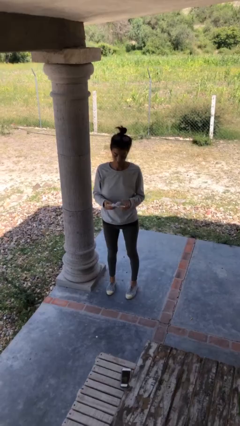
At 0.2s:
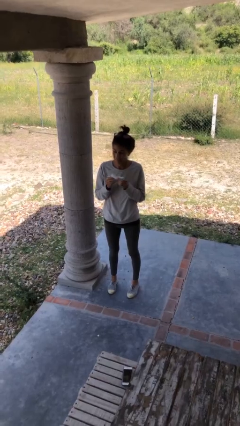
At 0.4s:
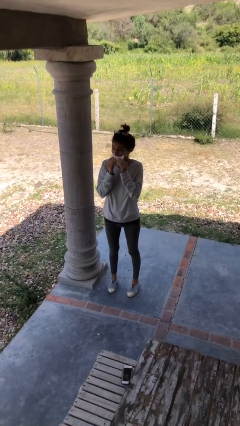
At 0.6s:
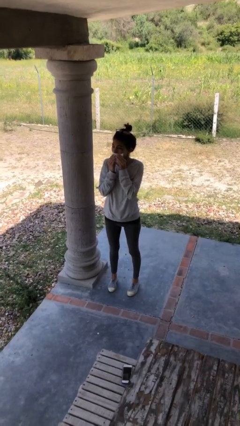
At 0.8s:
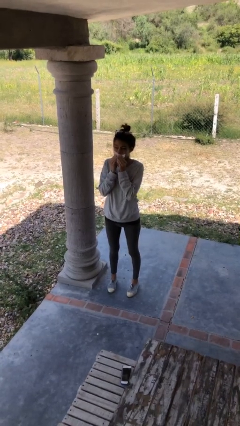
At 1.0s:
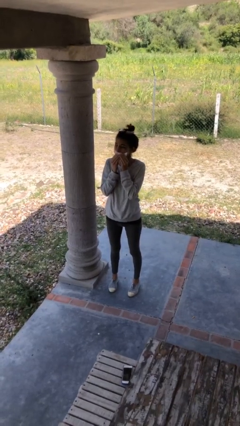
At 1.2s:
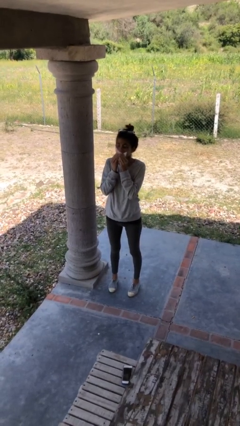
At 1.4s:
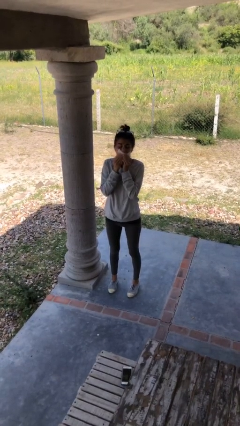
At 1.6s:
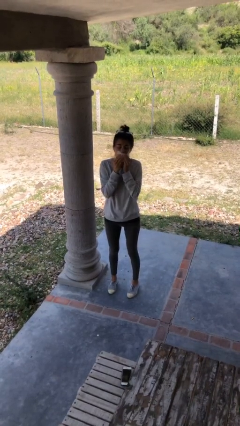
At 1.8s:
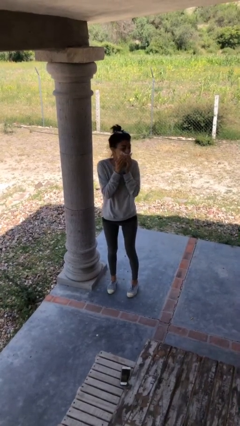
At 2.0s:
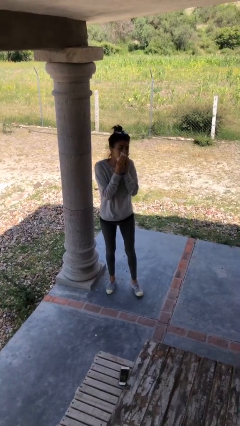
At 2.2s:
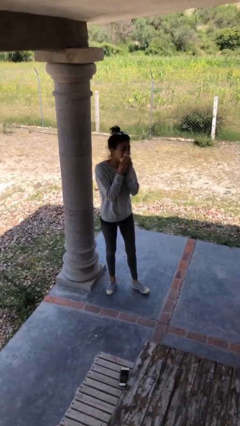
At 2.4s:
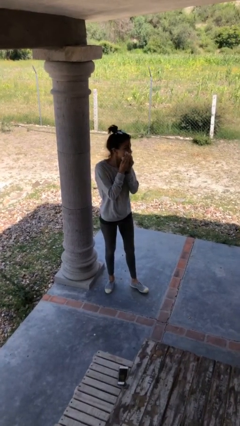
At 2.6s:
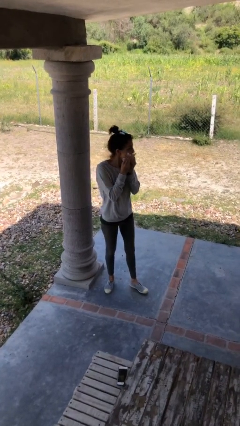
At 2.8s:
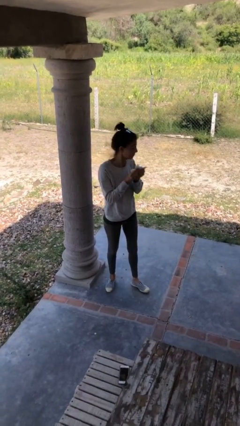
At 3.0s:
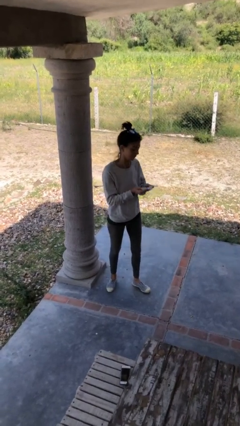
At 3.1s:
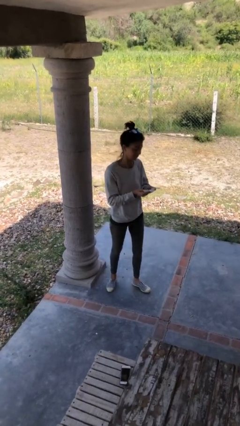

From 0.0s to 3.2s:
person wipes mouth with napkin

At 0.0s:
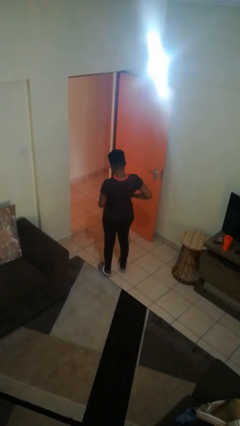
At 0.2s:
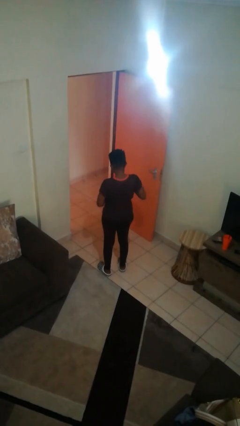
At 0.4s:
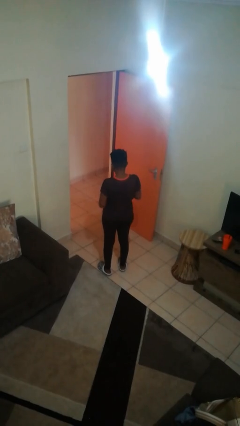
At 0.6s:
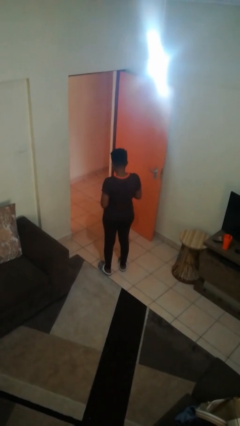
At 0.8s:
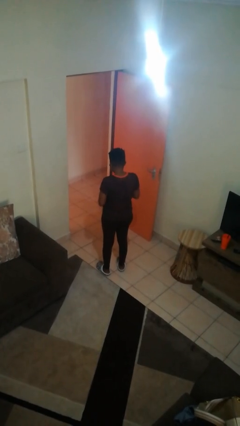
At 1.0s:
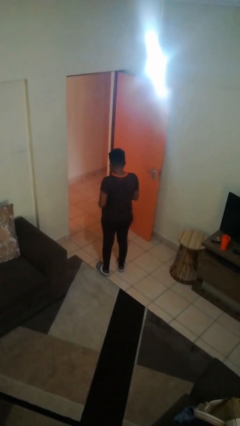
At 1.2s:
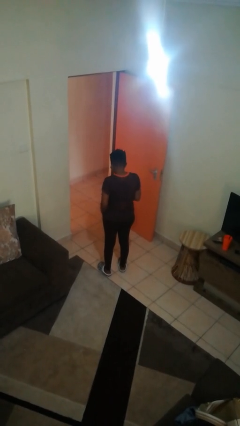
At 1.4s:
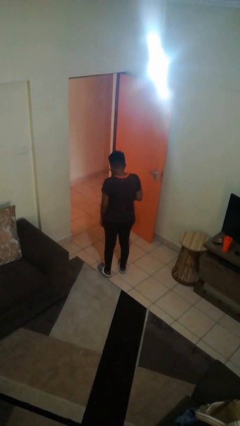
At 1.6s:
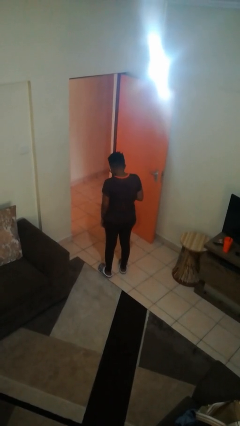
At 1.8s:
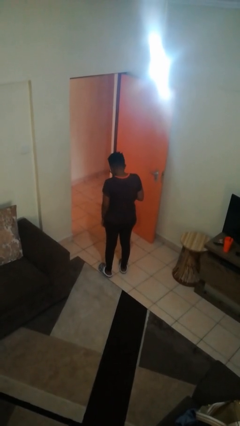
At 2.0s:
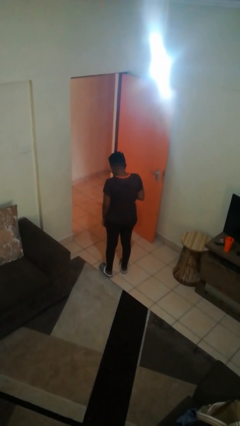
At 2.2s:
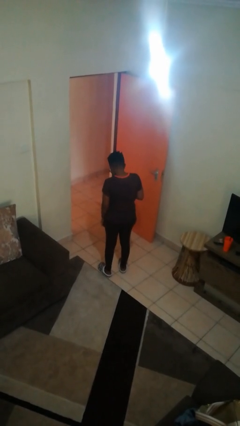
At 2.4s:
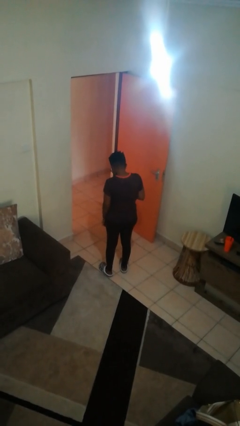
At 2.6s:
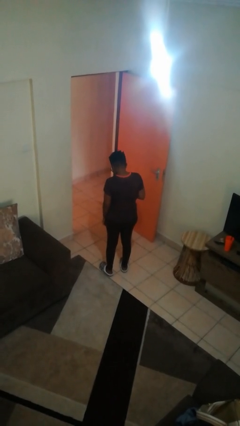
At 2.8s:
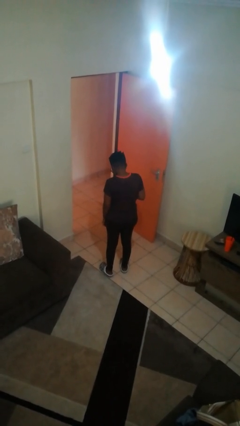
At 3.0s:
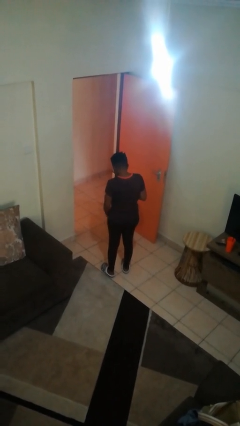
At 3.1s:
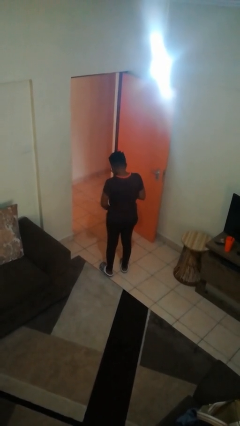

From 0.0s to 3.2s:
person takes phone from pocket

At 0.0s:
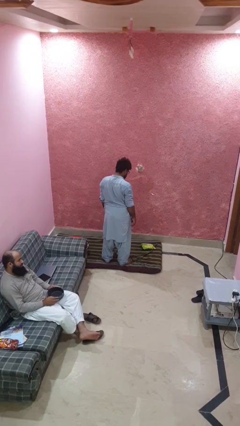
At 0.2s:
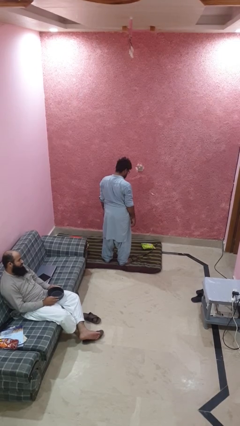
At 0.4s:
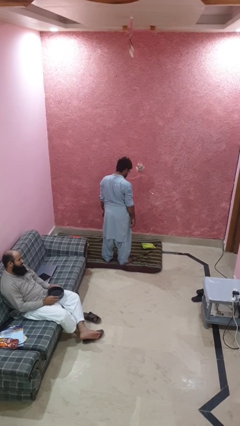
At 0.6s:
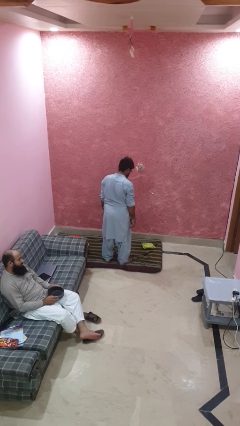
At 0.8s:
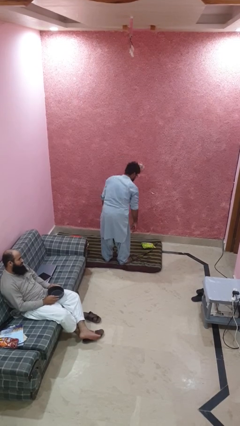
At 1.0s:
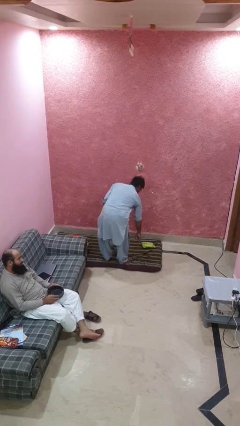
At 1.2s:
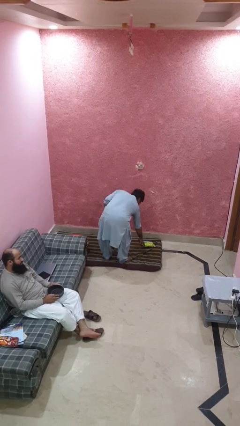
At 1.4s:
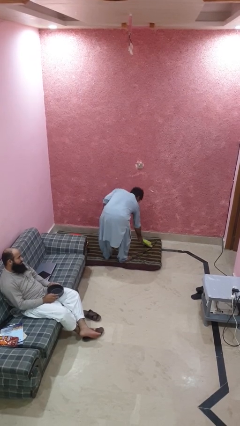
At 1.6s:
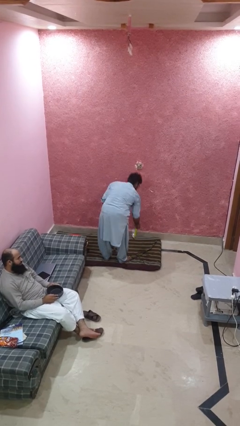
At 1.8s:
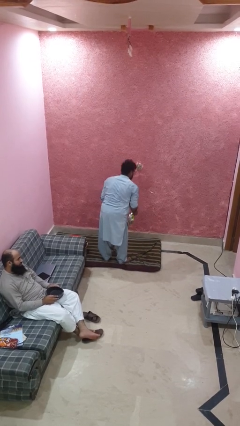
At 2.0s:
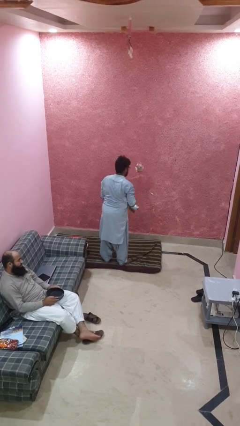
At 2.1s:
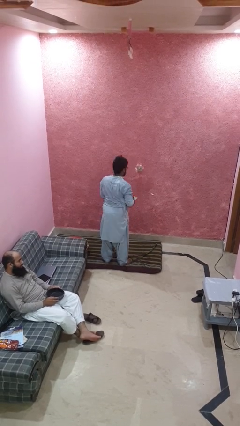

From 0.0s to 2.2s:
person picks up object from floor

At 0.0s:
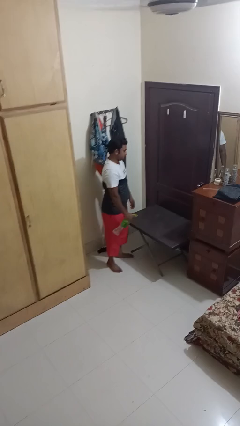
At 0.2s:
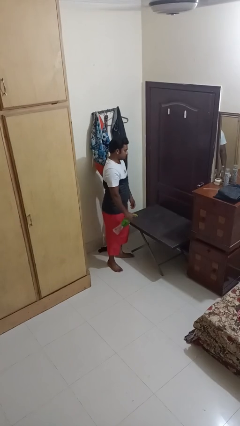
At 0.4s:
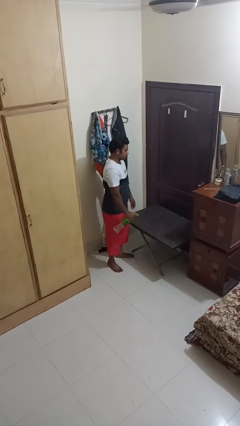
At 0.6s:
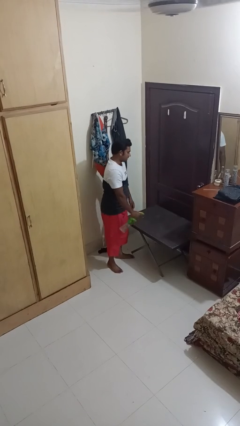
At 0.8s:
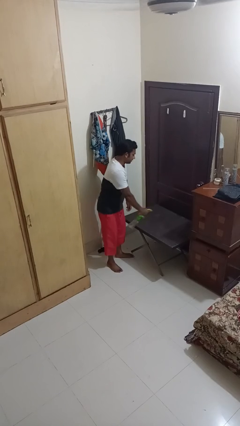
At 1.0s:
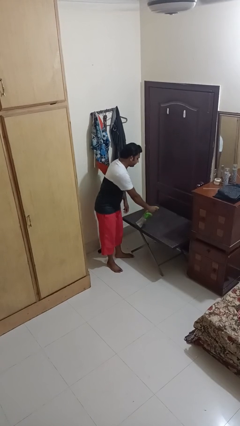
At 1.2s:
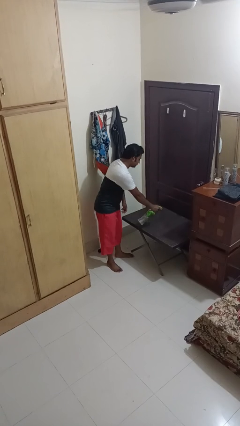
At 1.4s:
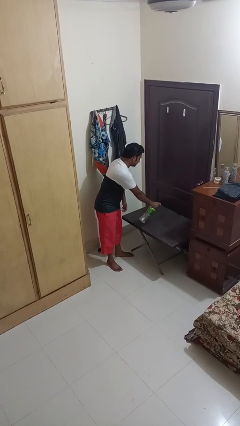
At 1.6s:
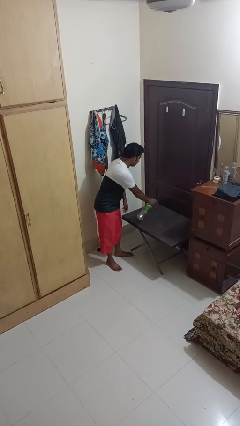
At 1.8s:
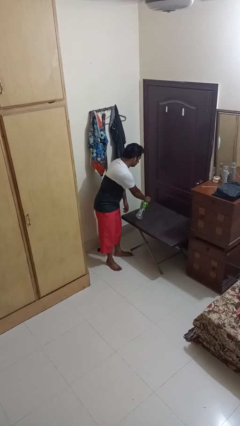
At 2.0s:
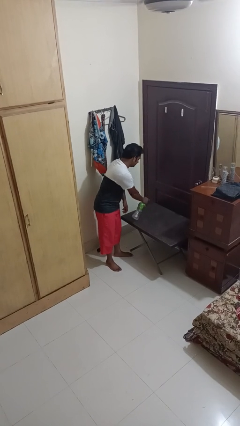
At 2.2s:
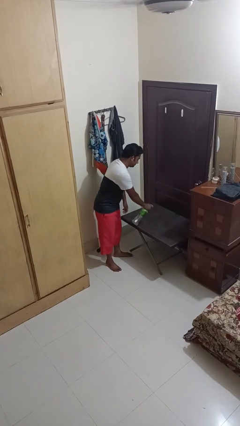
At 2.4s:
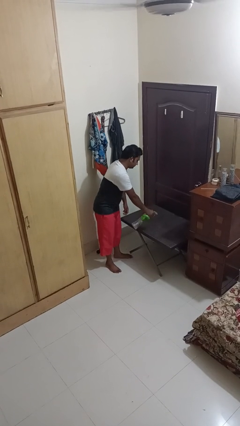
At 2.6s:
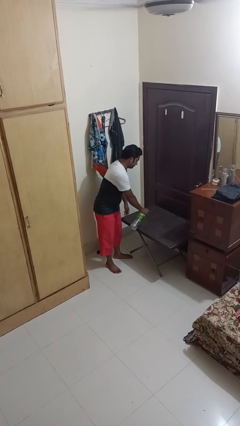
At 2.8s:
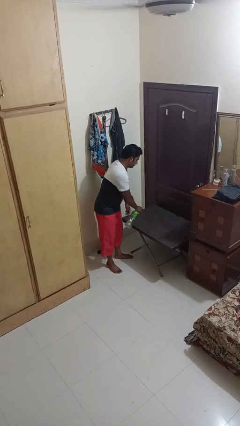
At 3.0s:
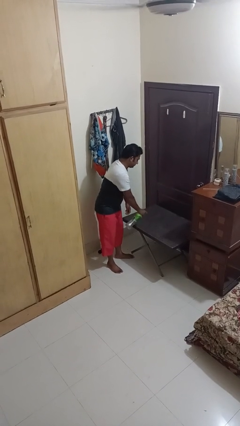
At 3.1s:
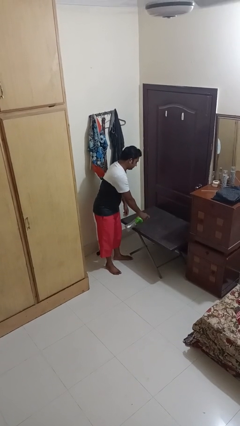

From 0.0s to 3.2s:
person sprays from bottle

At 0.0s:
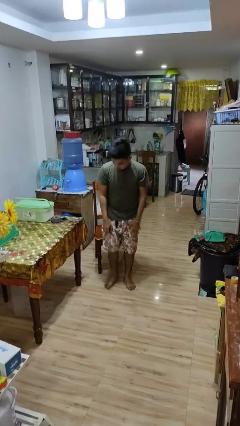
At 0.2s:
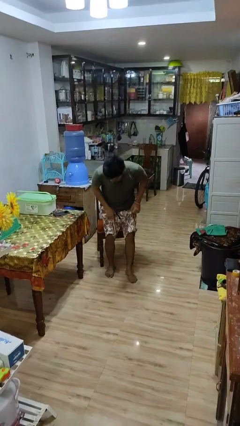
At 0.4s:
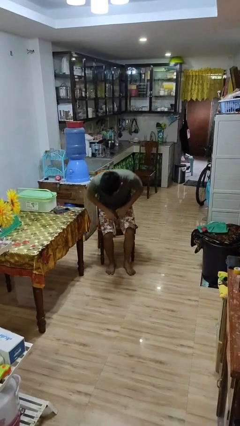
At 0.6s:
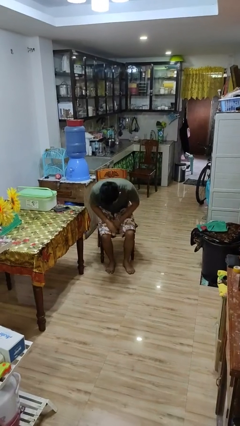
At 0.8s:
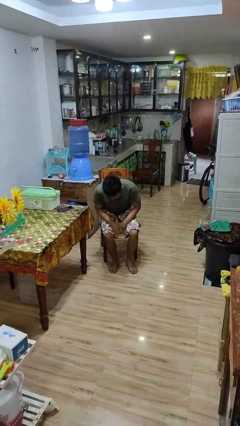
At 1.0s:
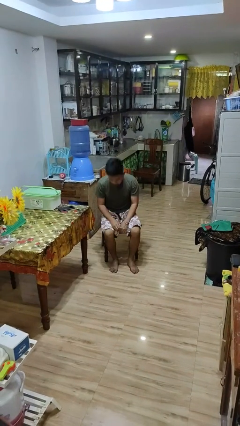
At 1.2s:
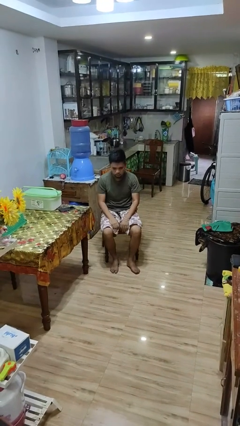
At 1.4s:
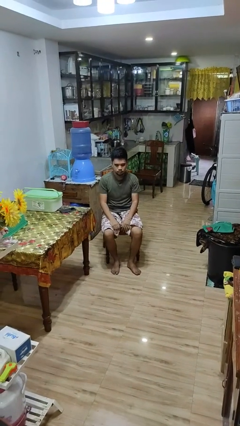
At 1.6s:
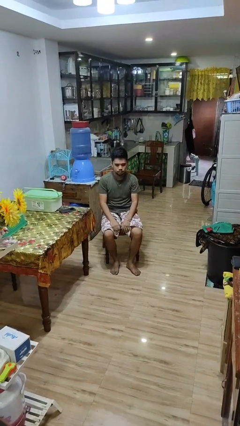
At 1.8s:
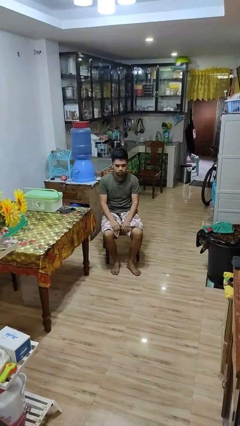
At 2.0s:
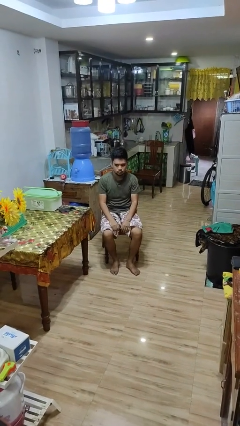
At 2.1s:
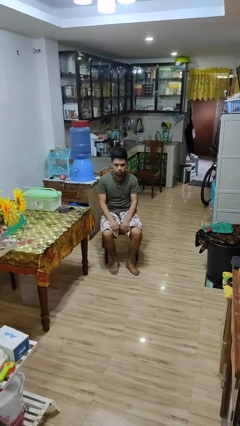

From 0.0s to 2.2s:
person sits down

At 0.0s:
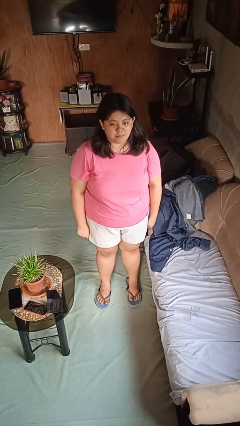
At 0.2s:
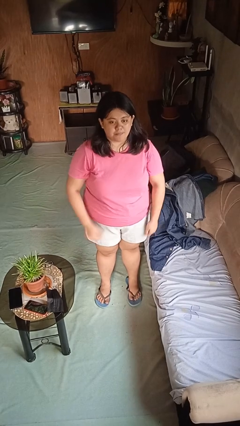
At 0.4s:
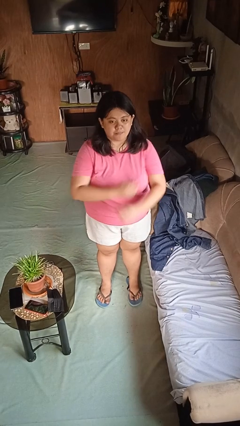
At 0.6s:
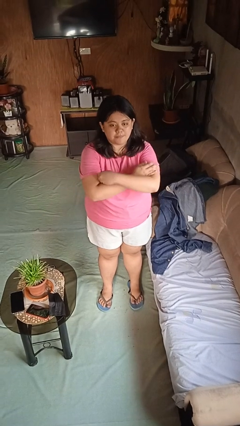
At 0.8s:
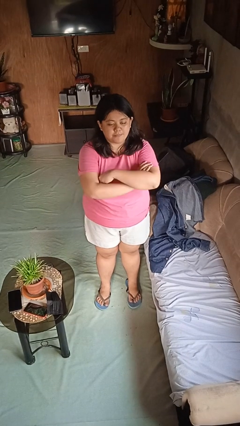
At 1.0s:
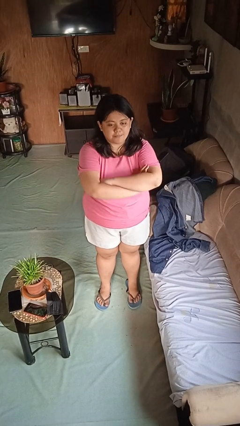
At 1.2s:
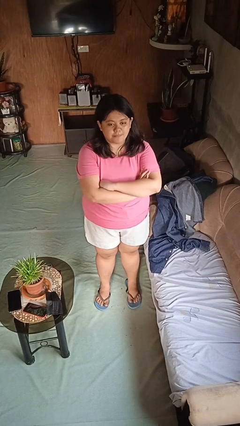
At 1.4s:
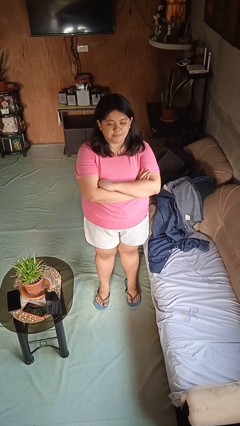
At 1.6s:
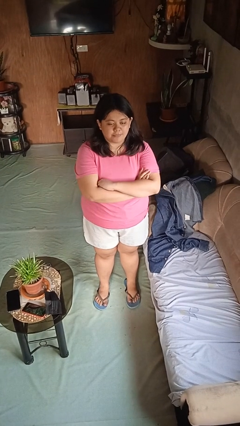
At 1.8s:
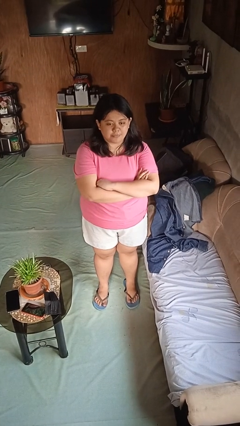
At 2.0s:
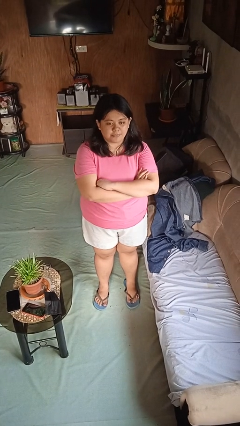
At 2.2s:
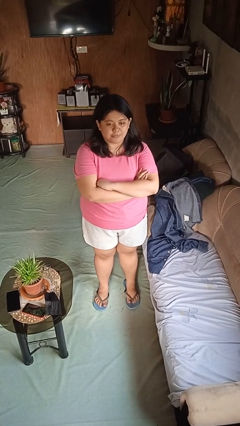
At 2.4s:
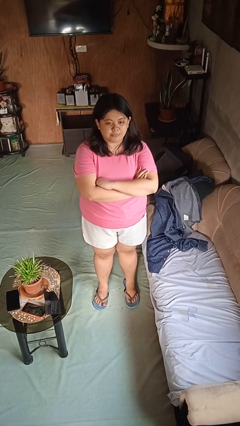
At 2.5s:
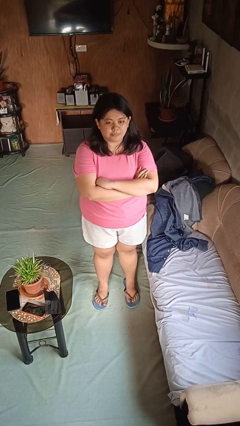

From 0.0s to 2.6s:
person crosses arms

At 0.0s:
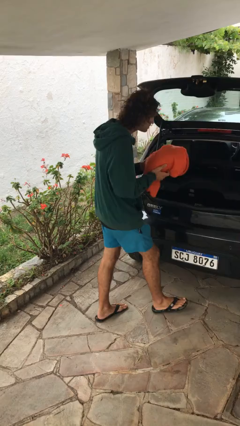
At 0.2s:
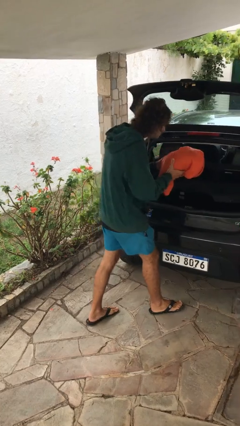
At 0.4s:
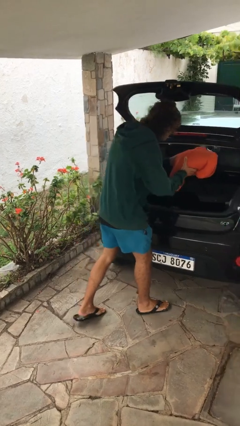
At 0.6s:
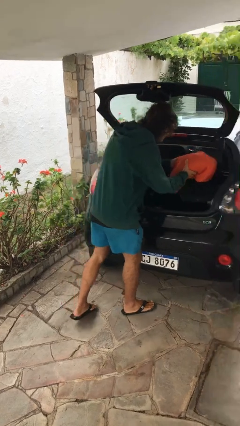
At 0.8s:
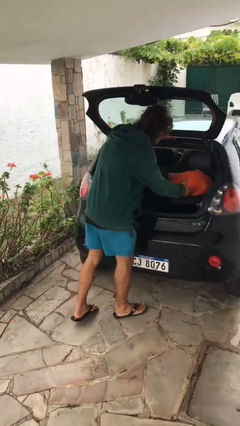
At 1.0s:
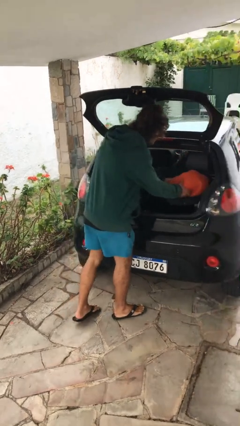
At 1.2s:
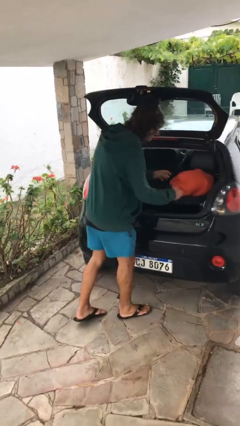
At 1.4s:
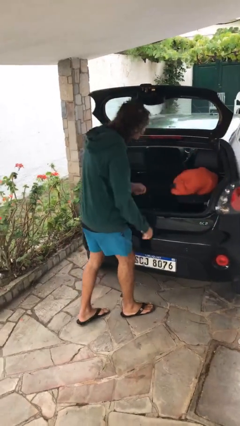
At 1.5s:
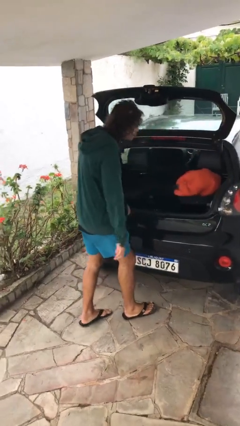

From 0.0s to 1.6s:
person loads car
